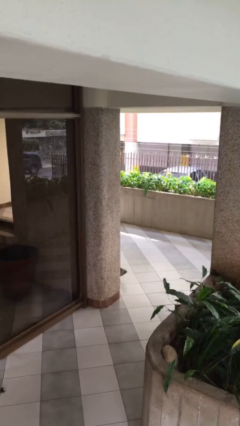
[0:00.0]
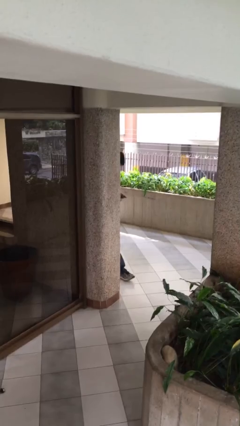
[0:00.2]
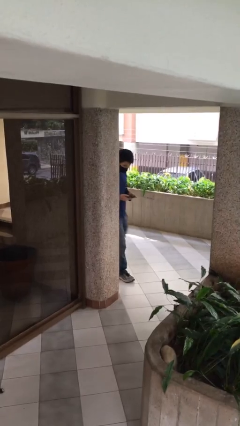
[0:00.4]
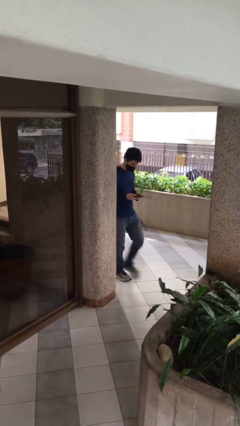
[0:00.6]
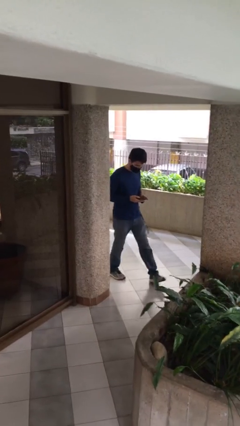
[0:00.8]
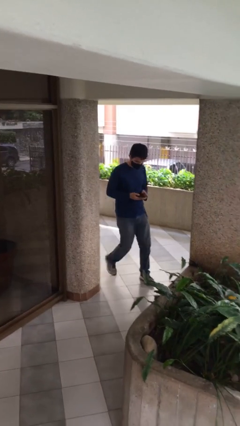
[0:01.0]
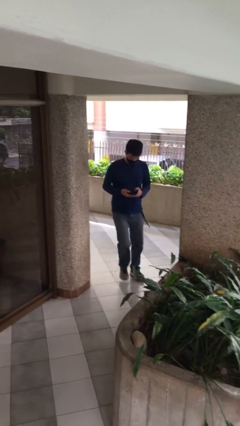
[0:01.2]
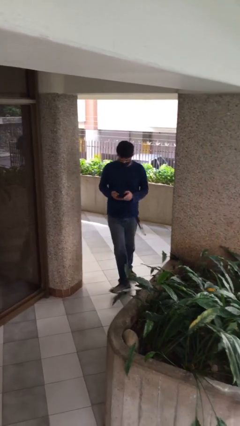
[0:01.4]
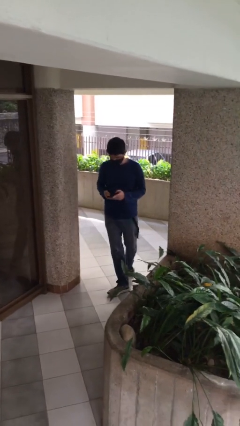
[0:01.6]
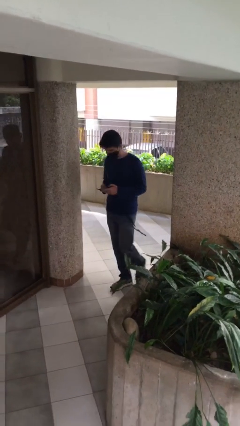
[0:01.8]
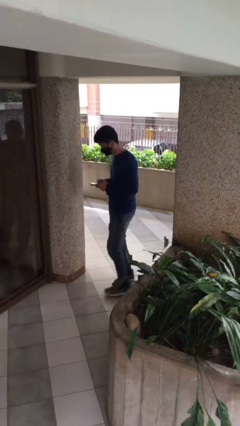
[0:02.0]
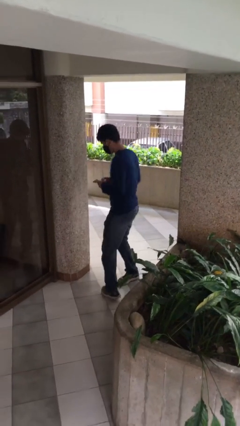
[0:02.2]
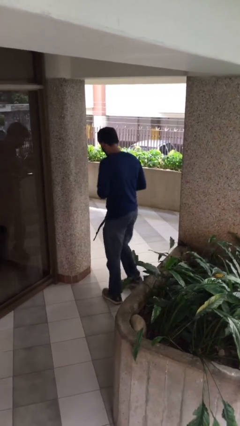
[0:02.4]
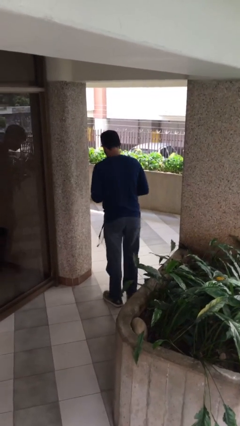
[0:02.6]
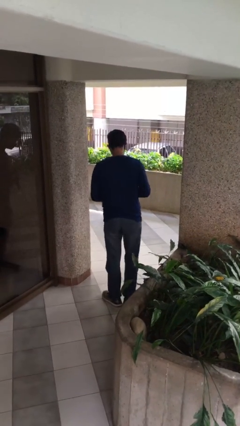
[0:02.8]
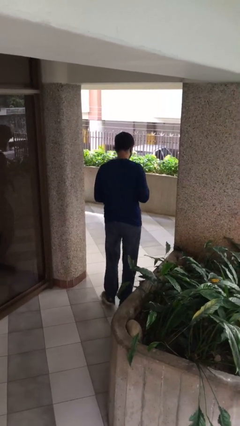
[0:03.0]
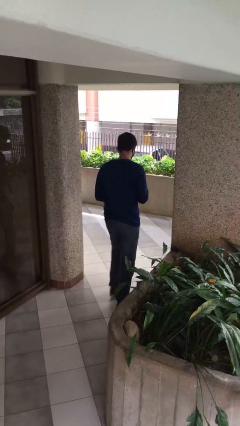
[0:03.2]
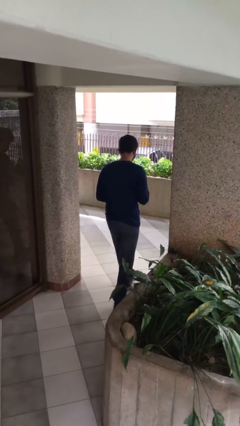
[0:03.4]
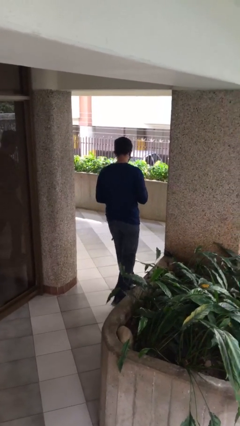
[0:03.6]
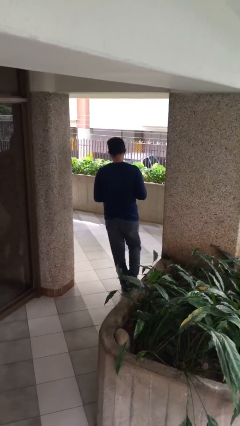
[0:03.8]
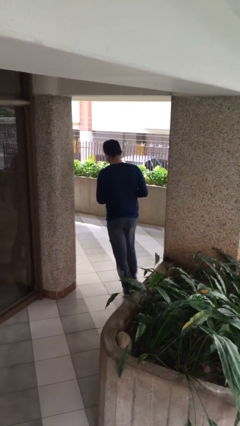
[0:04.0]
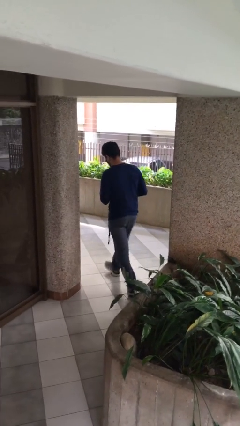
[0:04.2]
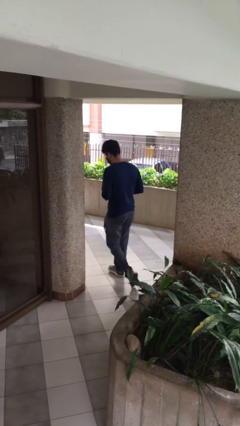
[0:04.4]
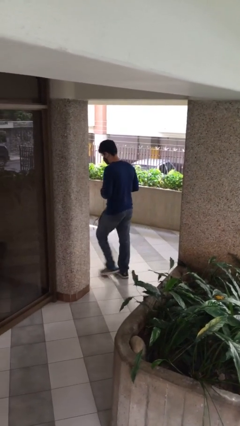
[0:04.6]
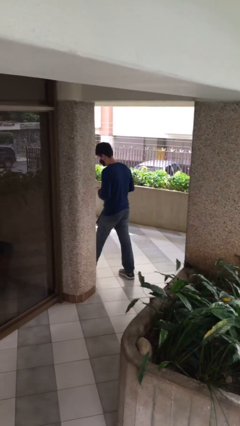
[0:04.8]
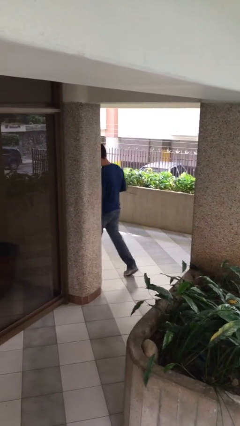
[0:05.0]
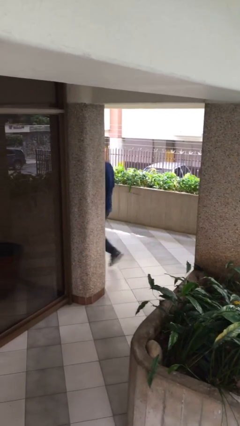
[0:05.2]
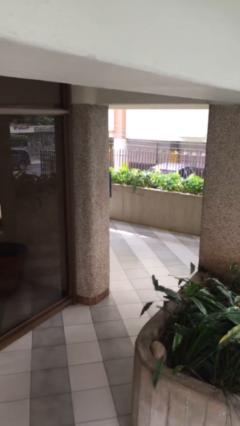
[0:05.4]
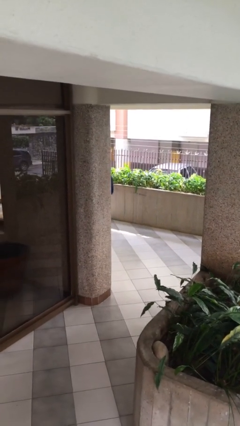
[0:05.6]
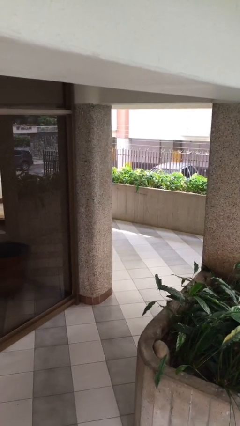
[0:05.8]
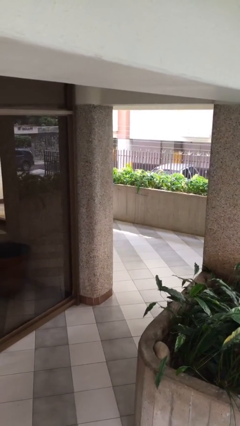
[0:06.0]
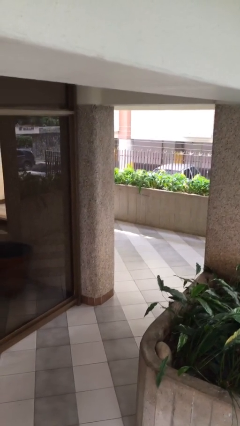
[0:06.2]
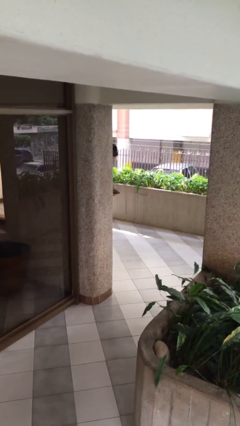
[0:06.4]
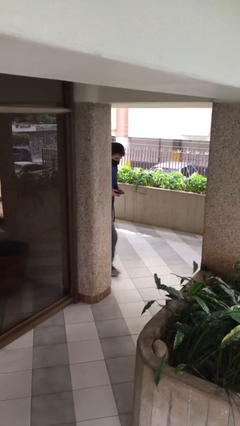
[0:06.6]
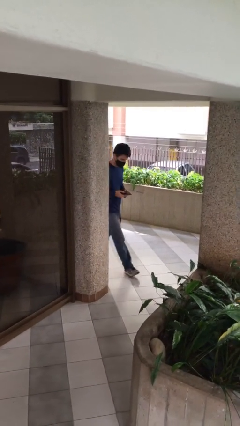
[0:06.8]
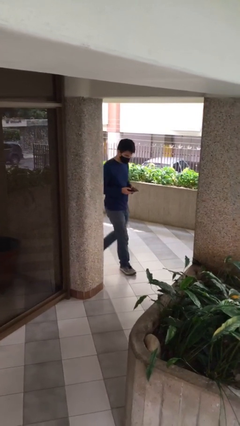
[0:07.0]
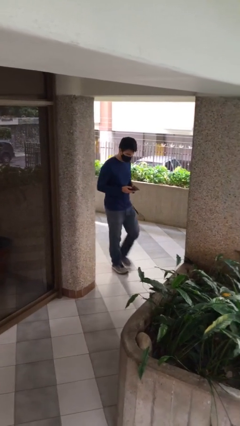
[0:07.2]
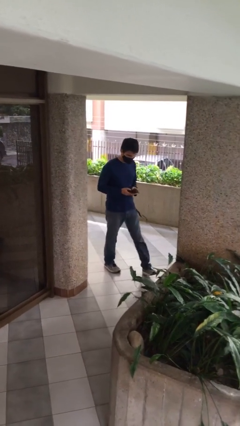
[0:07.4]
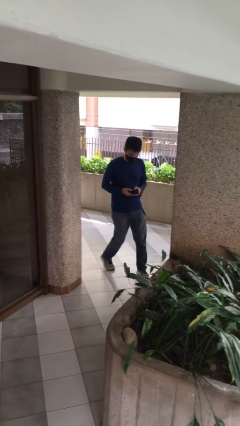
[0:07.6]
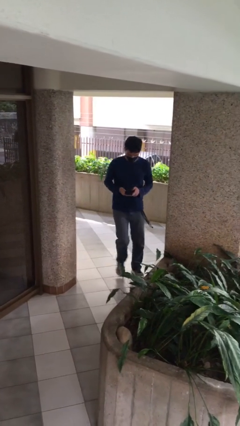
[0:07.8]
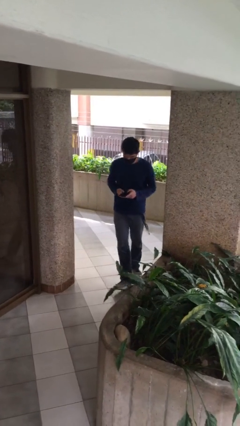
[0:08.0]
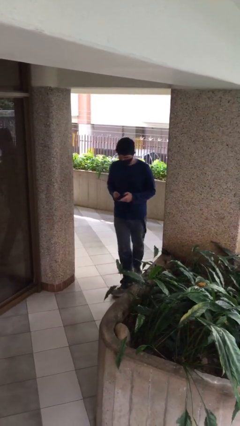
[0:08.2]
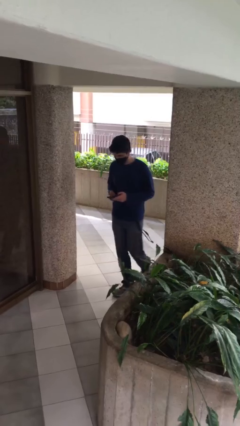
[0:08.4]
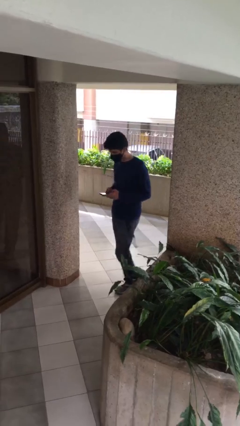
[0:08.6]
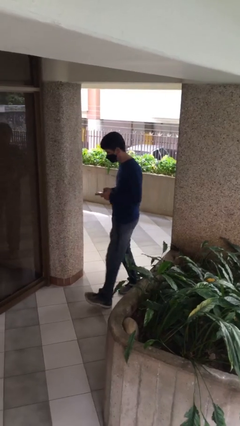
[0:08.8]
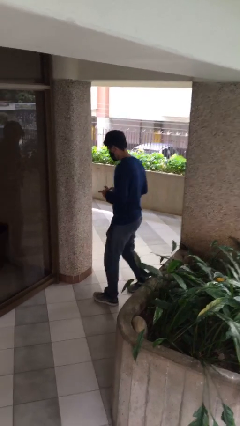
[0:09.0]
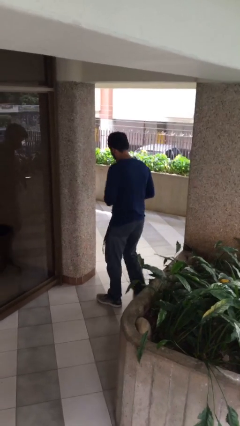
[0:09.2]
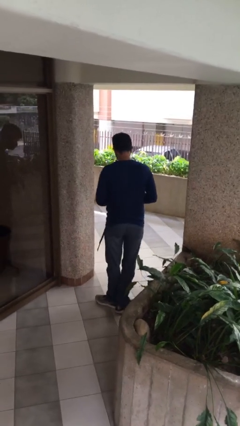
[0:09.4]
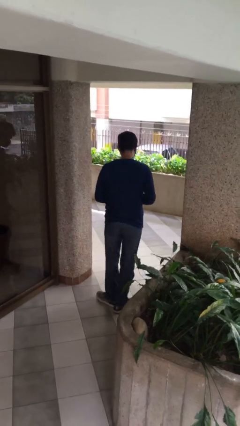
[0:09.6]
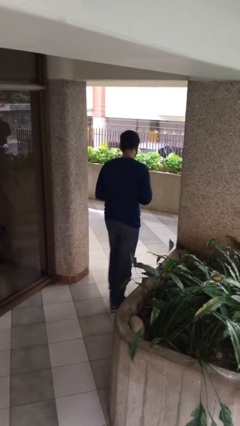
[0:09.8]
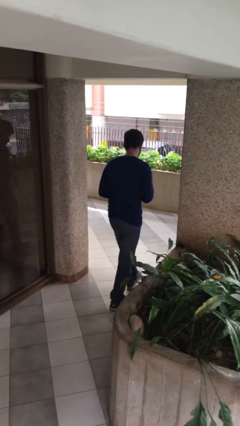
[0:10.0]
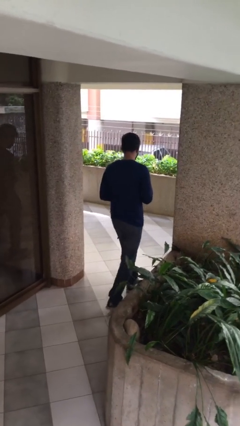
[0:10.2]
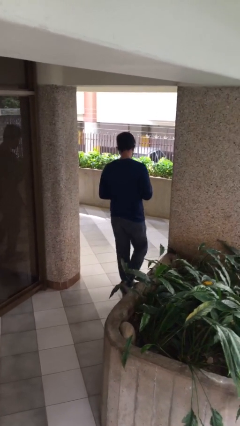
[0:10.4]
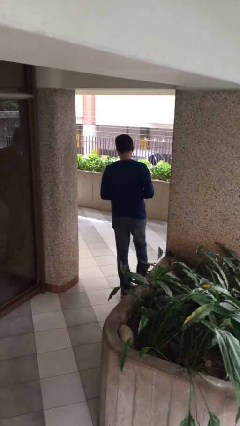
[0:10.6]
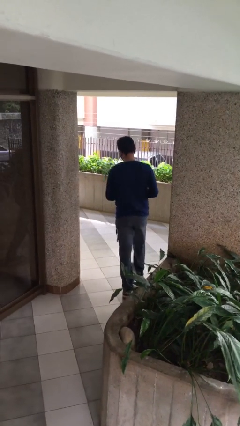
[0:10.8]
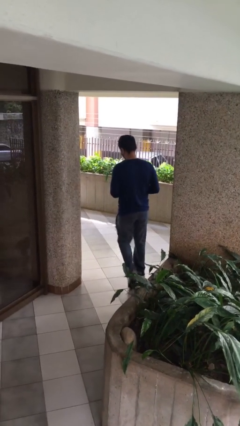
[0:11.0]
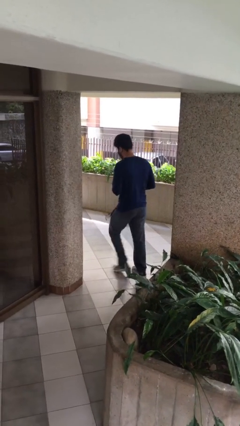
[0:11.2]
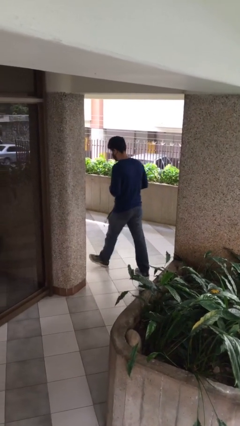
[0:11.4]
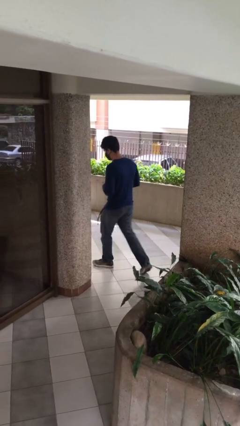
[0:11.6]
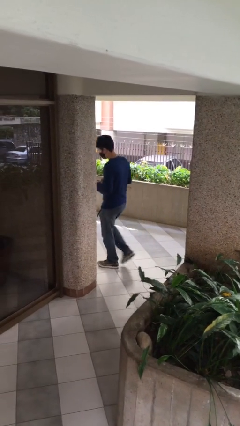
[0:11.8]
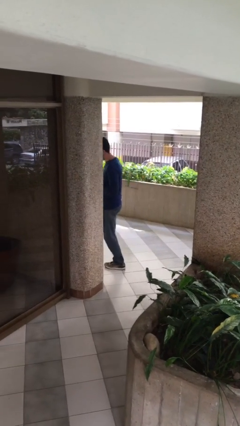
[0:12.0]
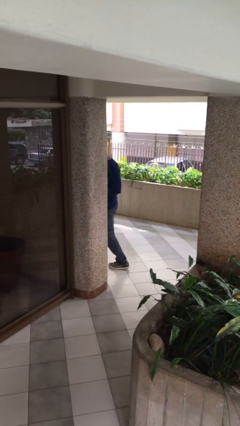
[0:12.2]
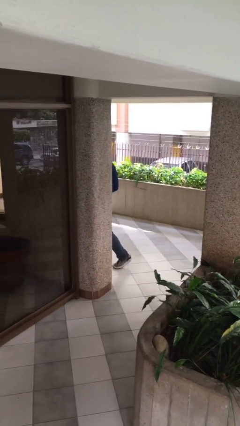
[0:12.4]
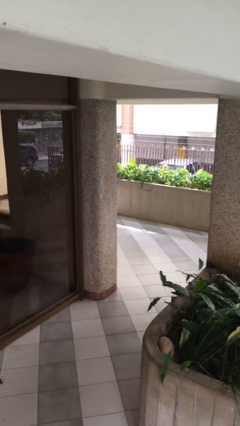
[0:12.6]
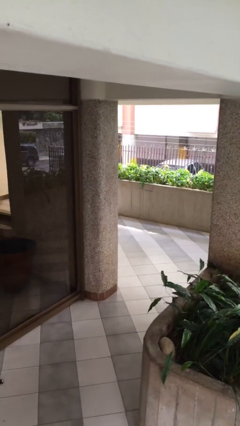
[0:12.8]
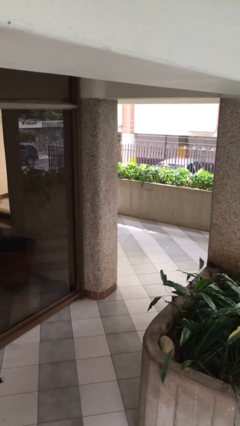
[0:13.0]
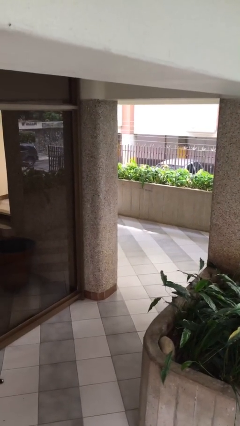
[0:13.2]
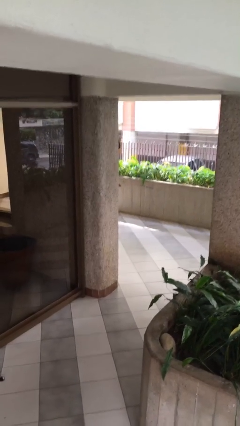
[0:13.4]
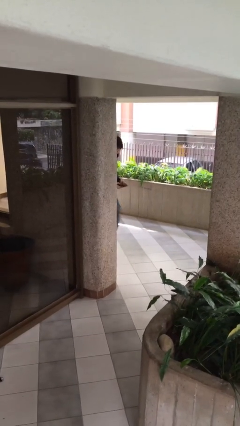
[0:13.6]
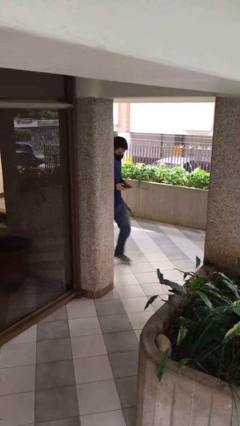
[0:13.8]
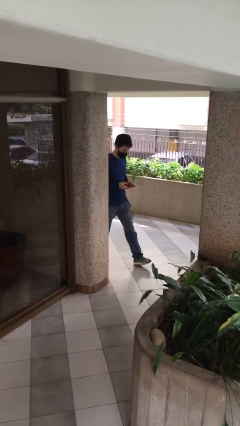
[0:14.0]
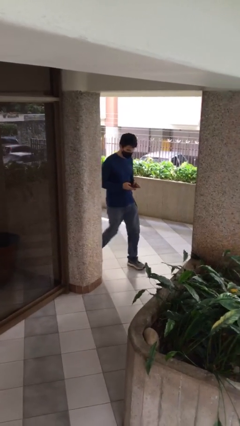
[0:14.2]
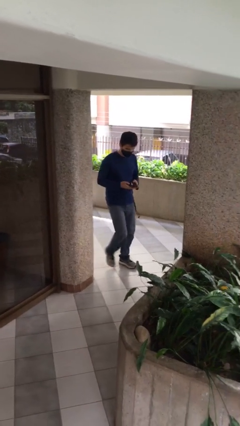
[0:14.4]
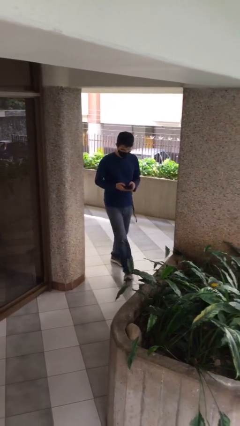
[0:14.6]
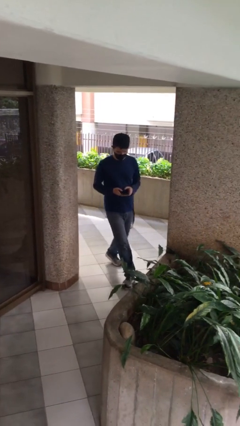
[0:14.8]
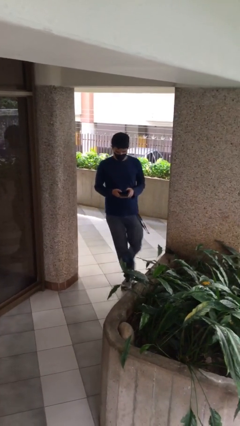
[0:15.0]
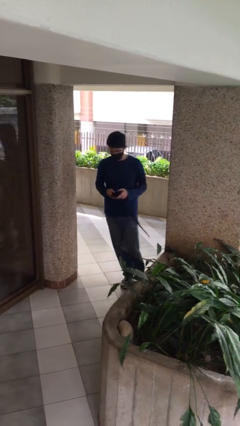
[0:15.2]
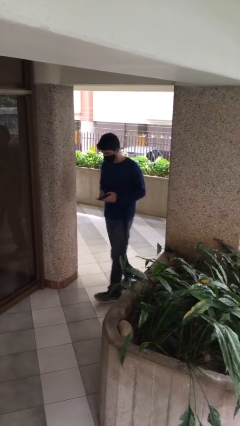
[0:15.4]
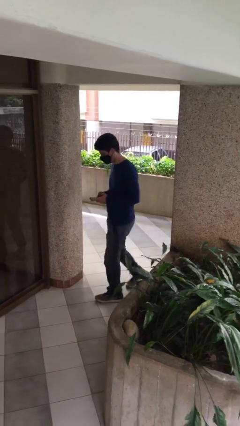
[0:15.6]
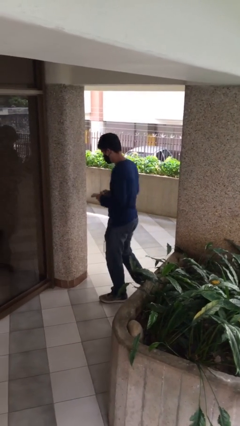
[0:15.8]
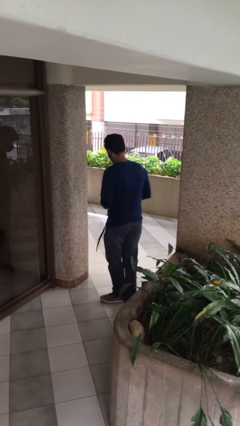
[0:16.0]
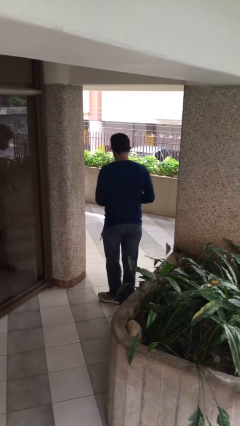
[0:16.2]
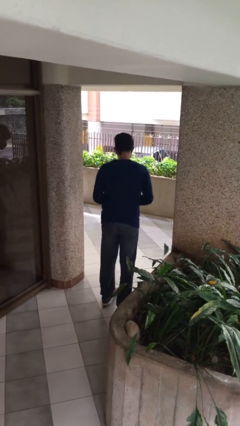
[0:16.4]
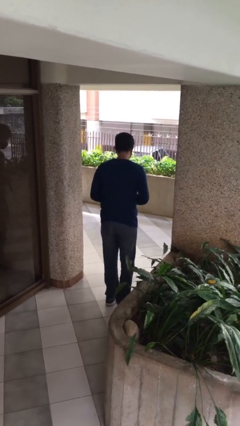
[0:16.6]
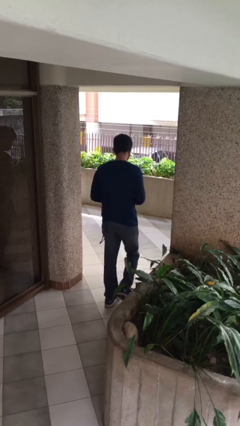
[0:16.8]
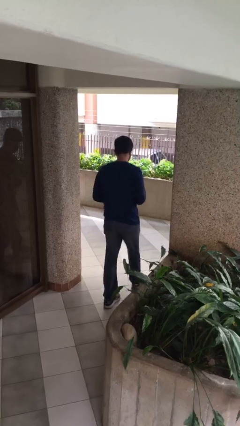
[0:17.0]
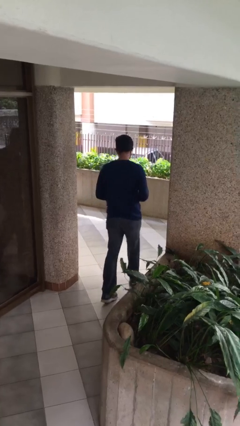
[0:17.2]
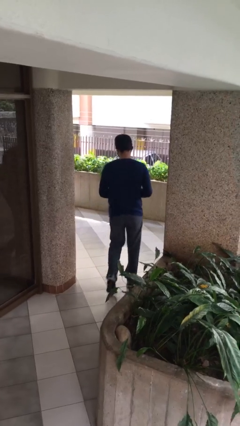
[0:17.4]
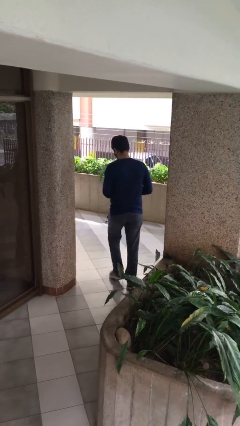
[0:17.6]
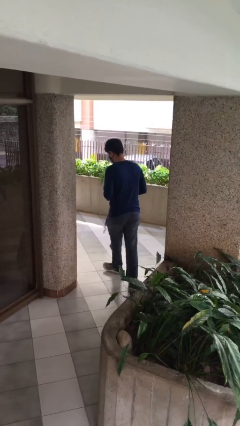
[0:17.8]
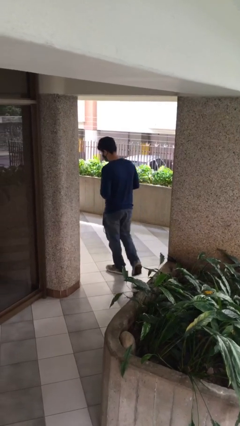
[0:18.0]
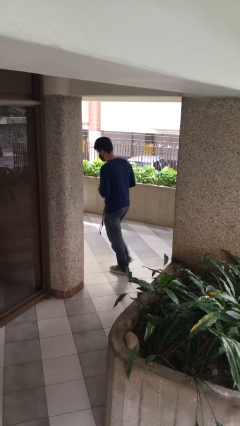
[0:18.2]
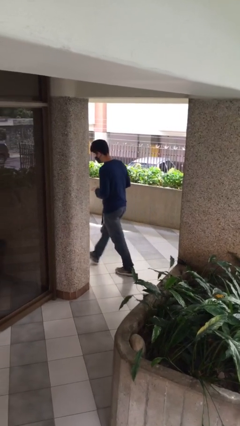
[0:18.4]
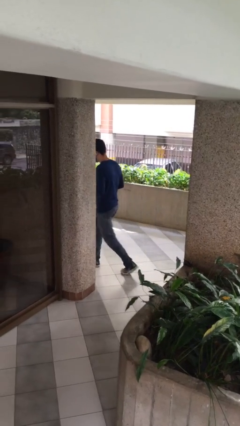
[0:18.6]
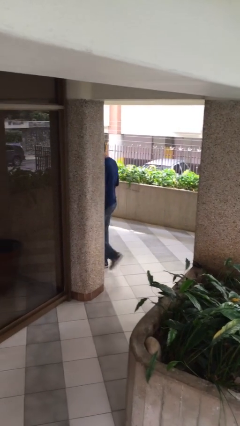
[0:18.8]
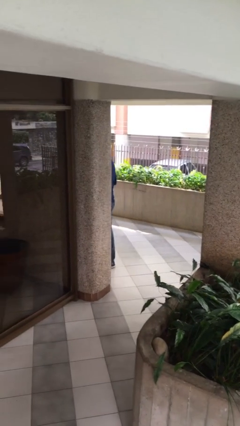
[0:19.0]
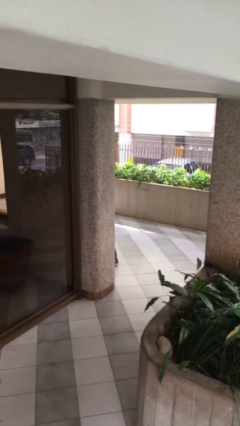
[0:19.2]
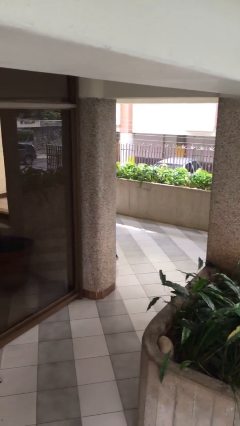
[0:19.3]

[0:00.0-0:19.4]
person texts on phone
